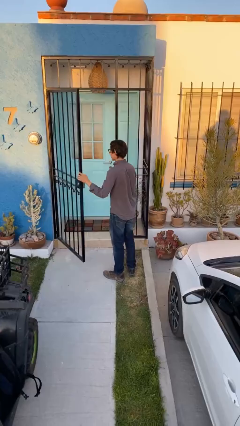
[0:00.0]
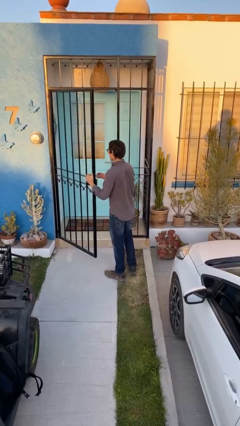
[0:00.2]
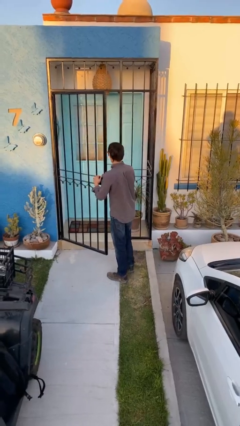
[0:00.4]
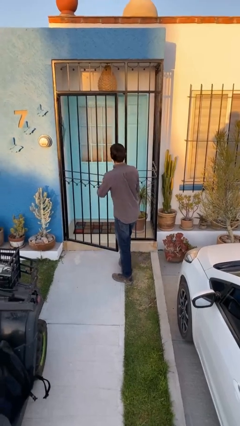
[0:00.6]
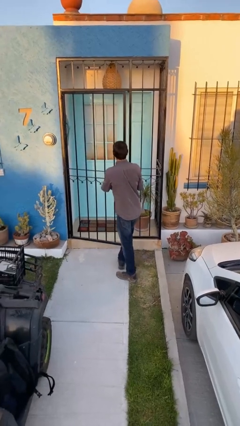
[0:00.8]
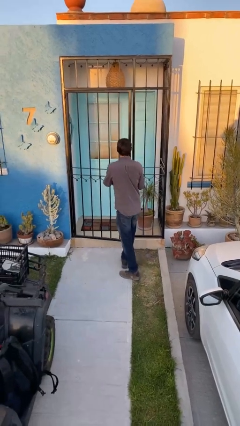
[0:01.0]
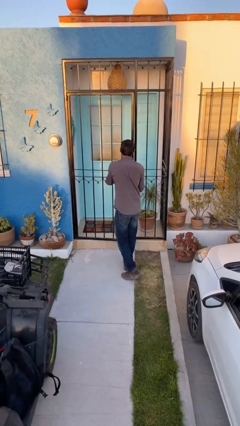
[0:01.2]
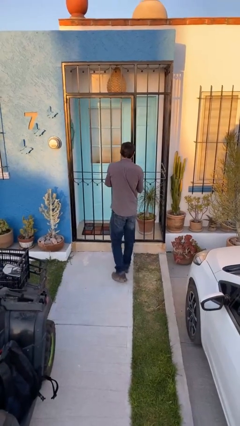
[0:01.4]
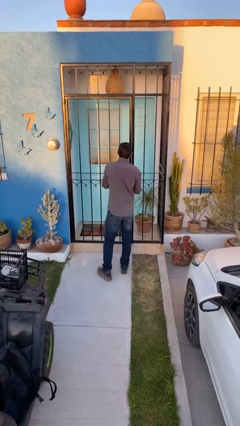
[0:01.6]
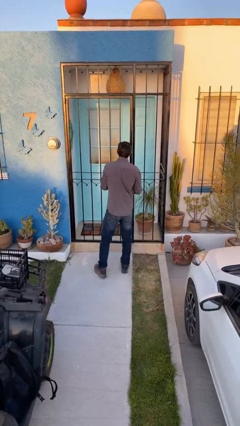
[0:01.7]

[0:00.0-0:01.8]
person closes facility door

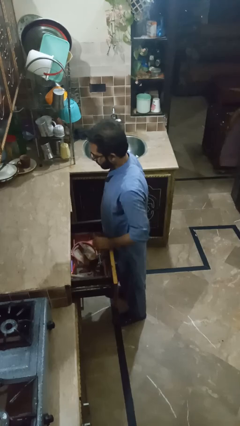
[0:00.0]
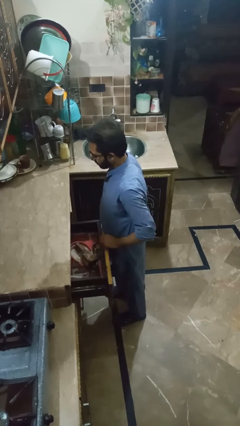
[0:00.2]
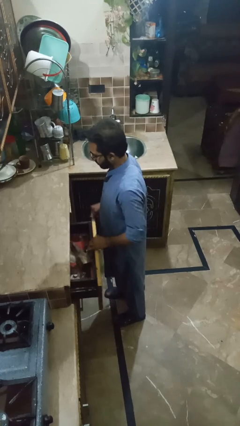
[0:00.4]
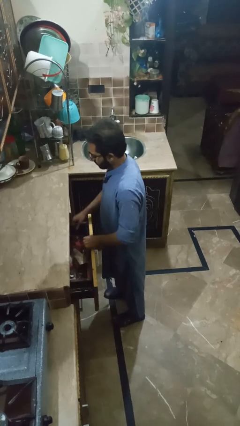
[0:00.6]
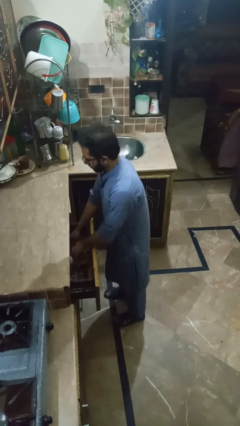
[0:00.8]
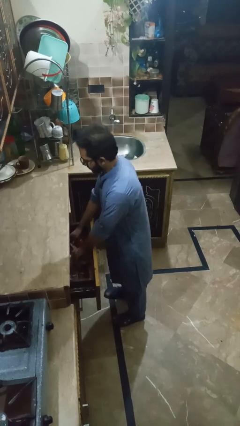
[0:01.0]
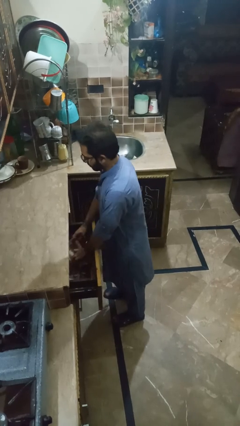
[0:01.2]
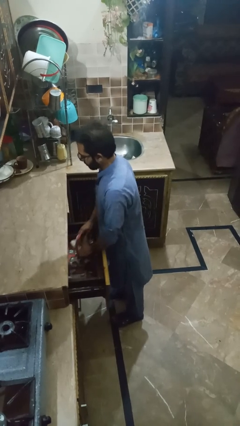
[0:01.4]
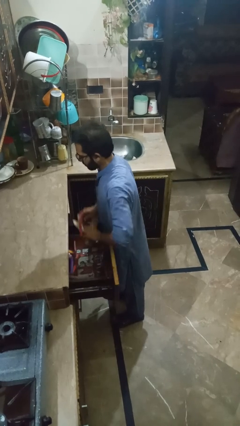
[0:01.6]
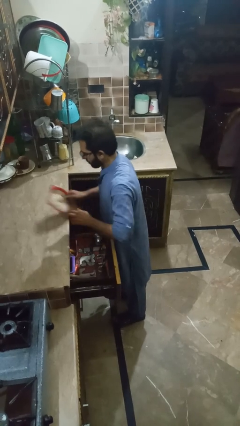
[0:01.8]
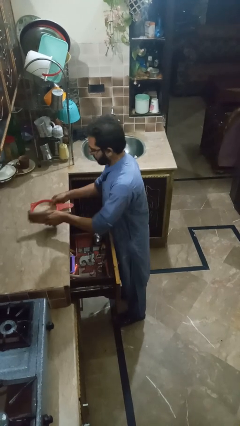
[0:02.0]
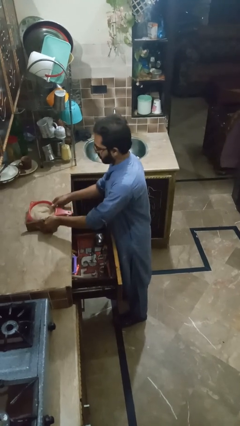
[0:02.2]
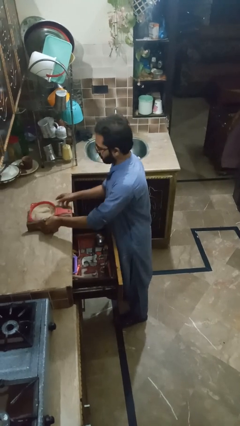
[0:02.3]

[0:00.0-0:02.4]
person puts object into kitchen drawer

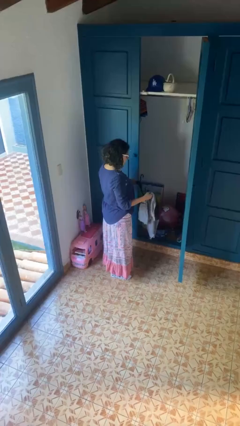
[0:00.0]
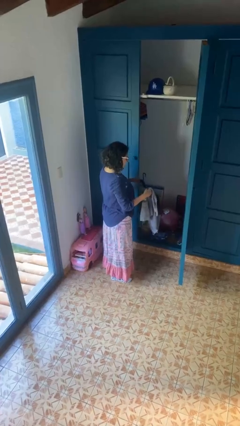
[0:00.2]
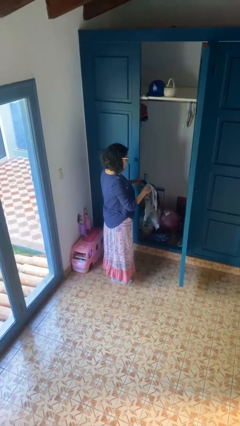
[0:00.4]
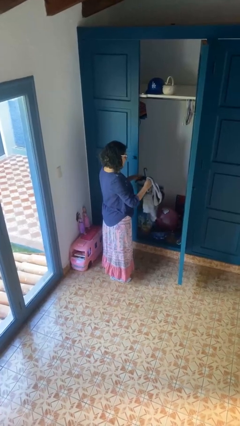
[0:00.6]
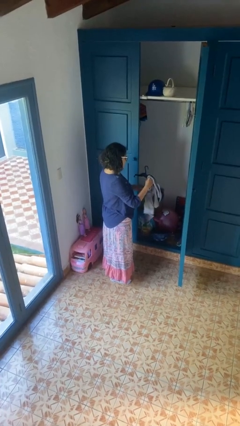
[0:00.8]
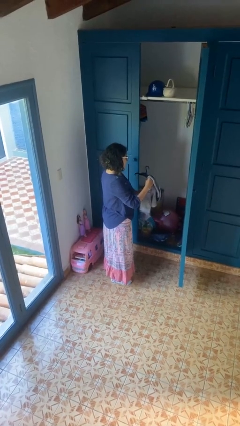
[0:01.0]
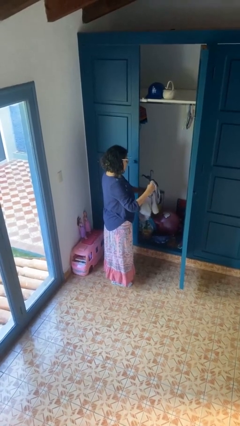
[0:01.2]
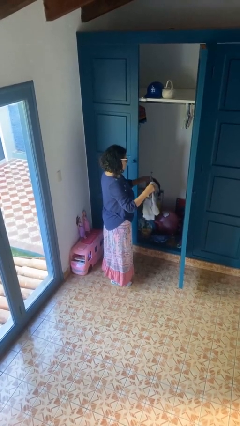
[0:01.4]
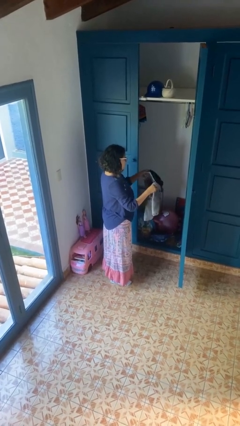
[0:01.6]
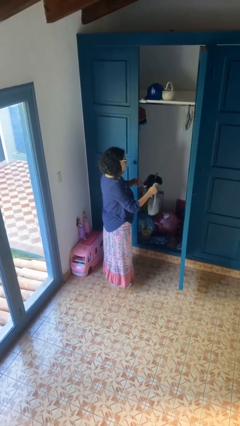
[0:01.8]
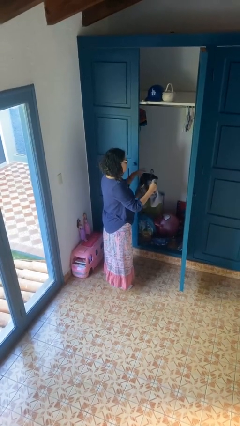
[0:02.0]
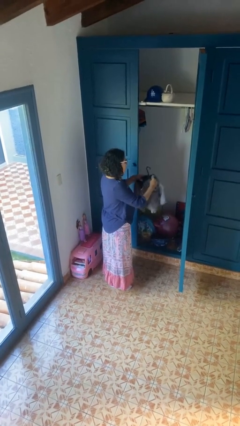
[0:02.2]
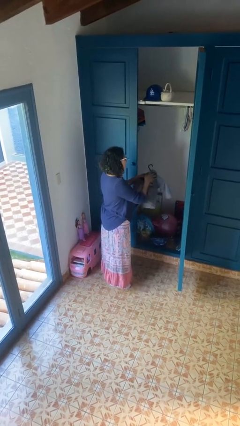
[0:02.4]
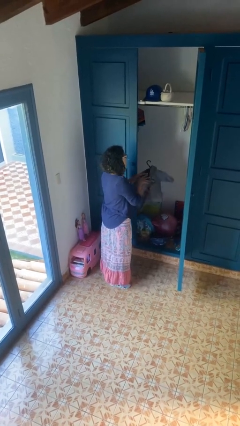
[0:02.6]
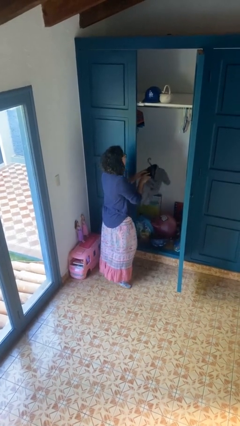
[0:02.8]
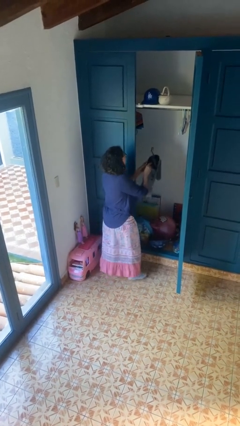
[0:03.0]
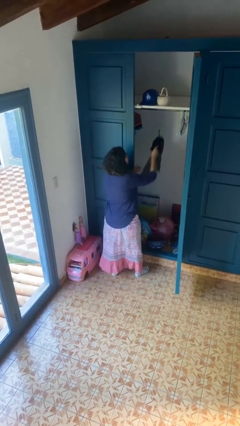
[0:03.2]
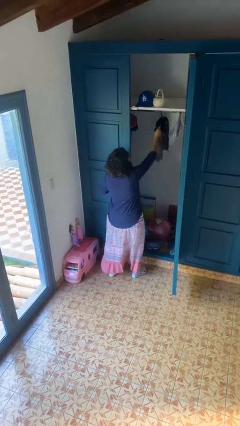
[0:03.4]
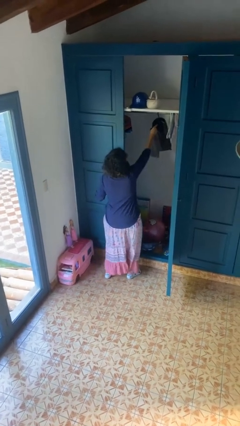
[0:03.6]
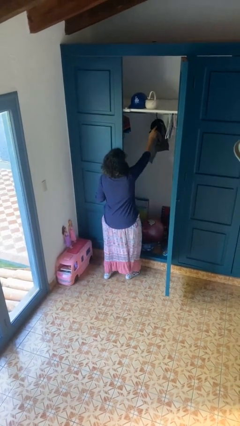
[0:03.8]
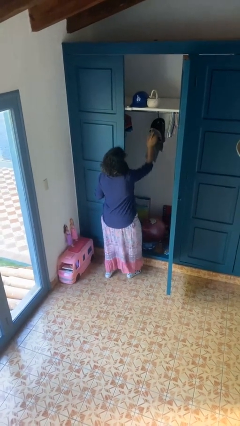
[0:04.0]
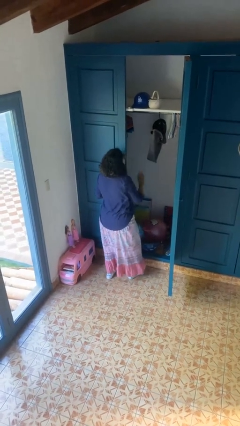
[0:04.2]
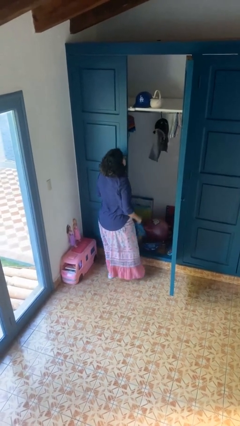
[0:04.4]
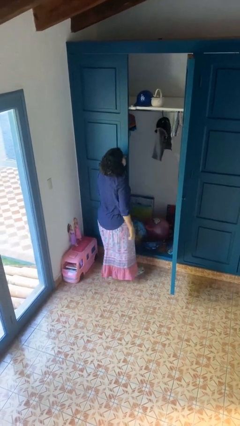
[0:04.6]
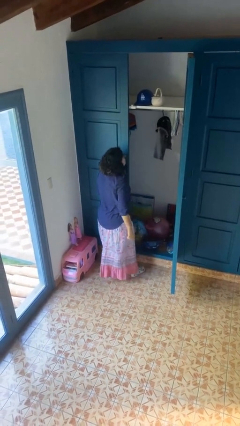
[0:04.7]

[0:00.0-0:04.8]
person puts clothes into closet

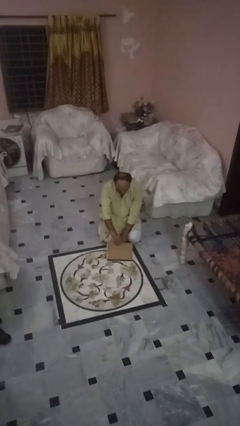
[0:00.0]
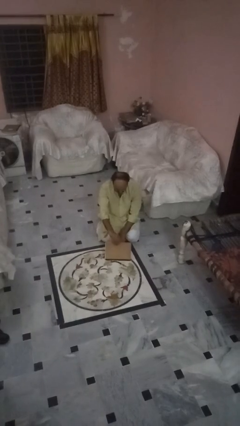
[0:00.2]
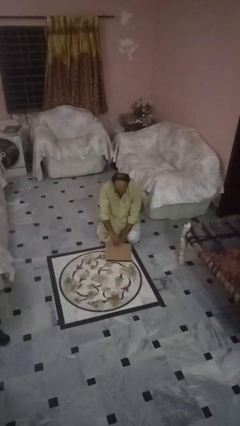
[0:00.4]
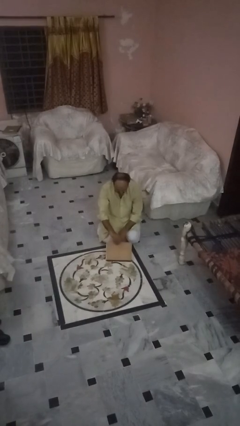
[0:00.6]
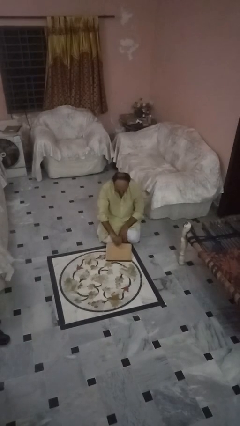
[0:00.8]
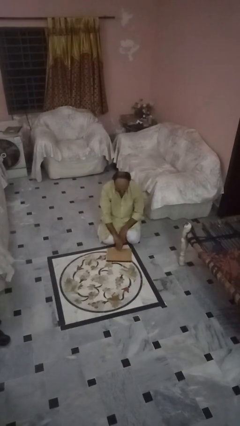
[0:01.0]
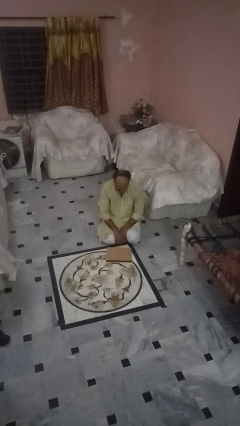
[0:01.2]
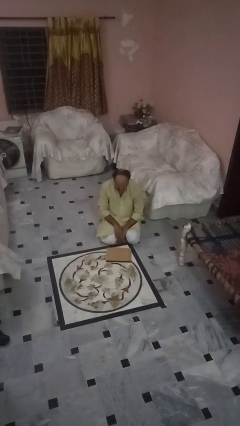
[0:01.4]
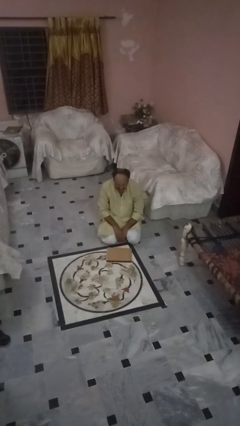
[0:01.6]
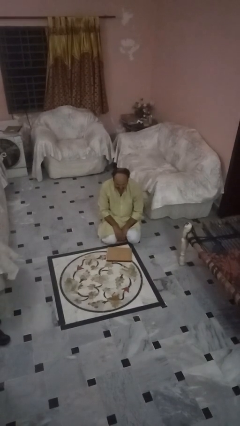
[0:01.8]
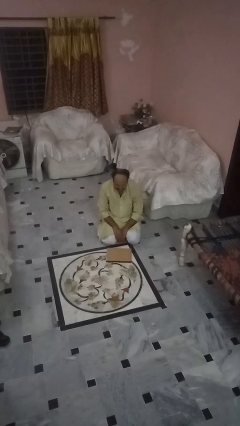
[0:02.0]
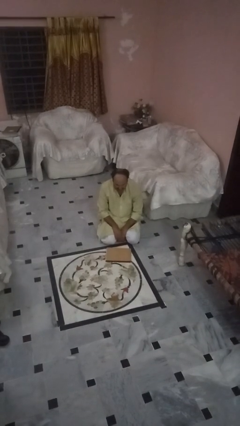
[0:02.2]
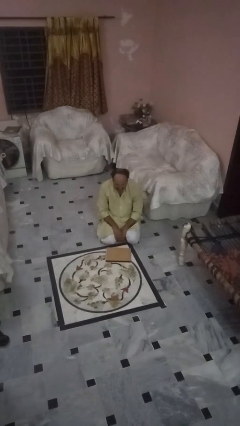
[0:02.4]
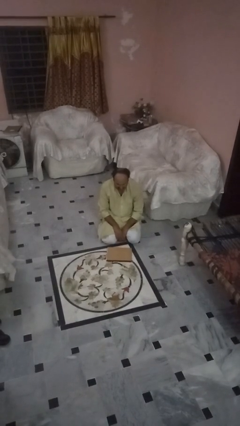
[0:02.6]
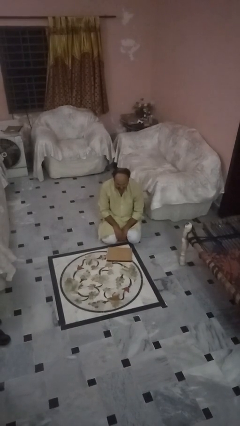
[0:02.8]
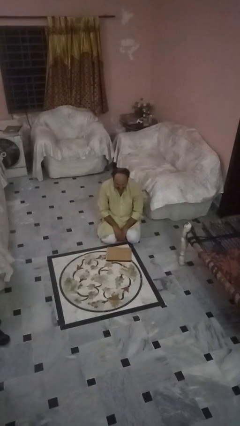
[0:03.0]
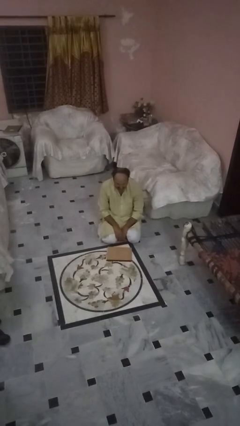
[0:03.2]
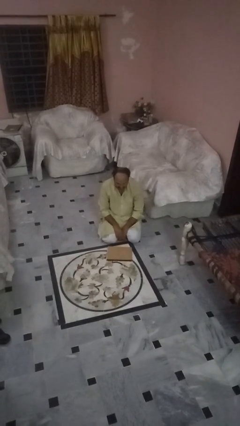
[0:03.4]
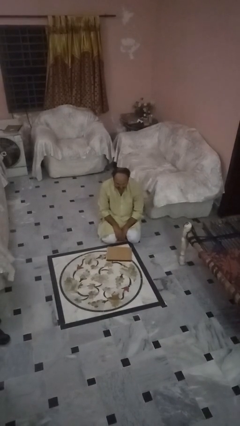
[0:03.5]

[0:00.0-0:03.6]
person closes laptop

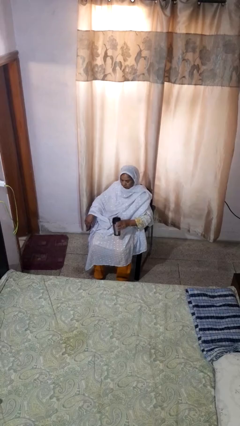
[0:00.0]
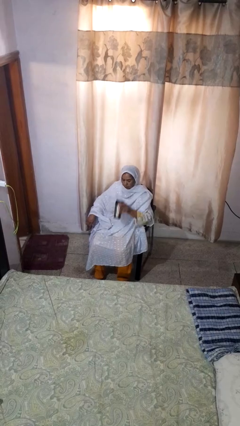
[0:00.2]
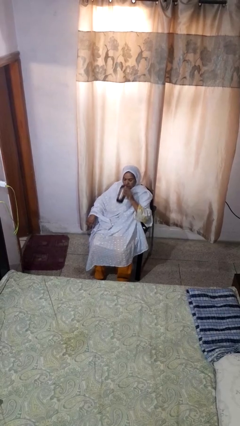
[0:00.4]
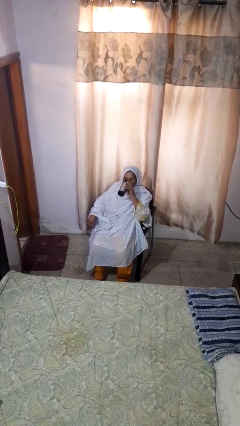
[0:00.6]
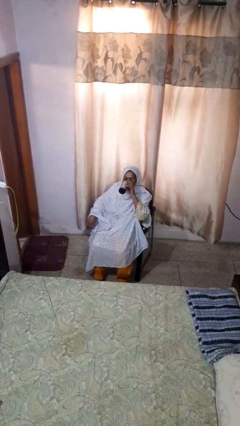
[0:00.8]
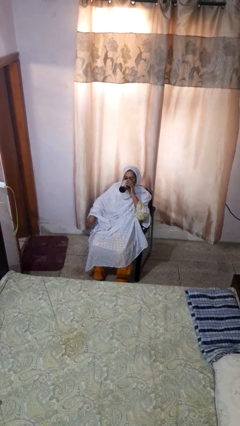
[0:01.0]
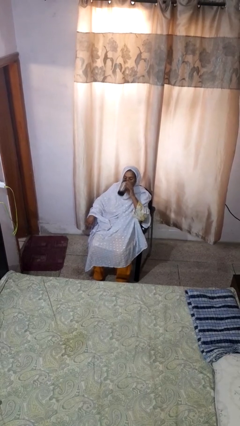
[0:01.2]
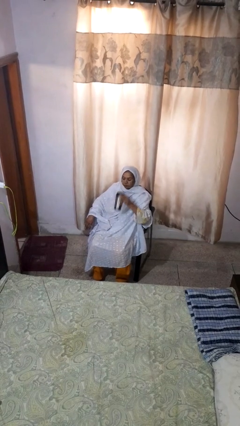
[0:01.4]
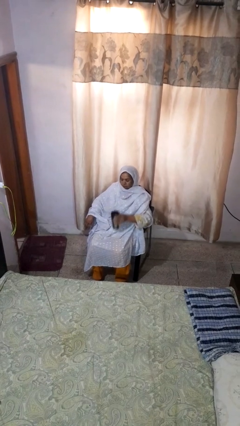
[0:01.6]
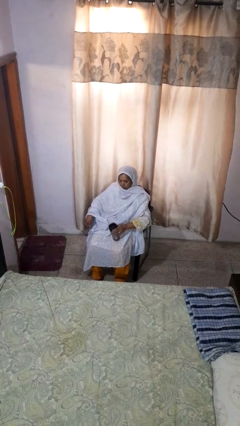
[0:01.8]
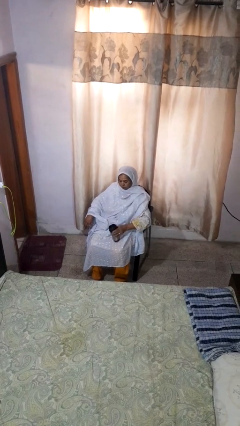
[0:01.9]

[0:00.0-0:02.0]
person drinks from beverage can

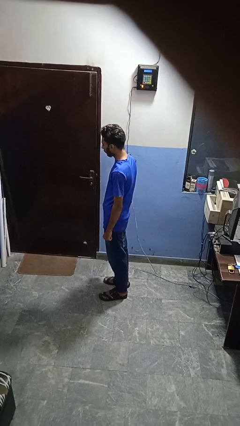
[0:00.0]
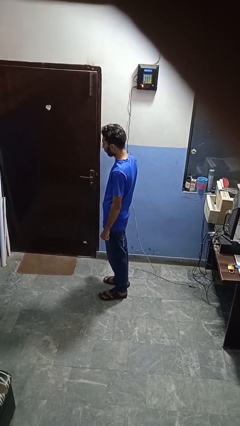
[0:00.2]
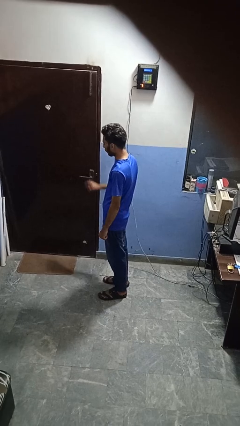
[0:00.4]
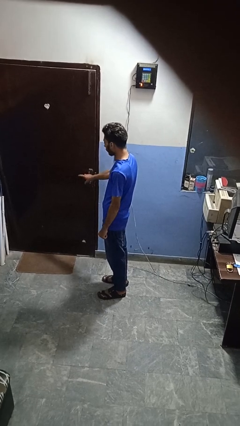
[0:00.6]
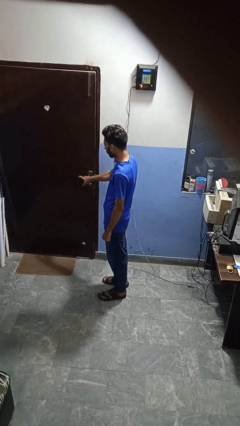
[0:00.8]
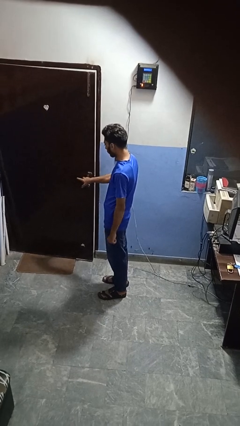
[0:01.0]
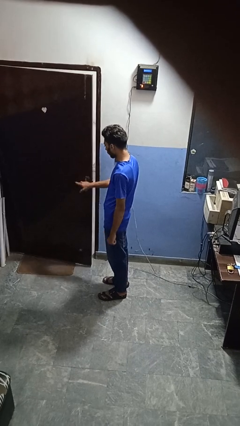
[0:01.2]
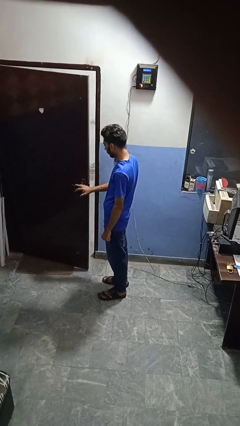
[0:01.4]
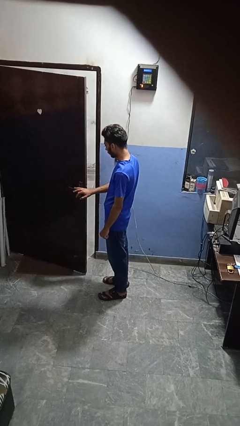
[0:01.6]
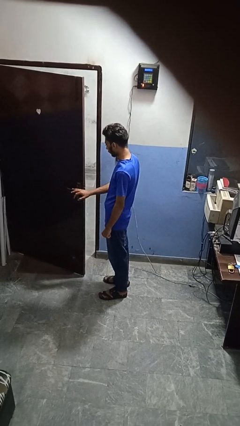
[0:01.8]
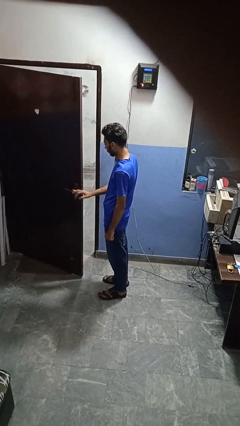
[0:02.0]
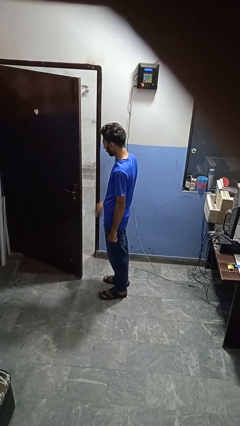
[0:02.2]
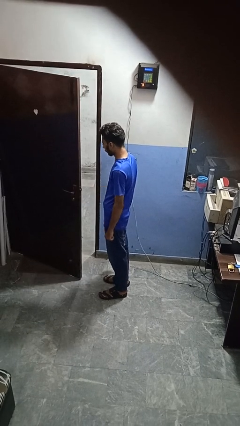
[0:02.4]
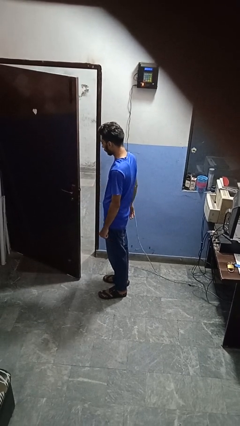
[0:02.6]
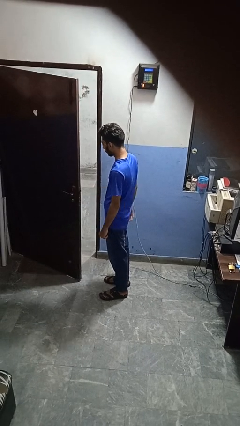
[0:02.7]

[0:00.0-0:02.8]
person opens facility door

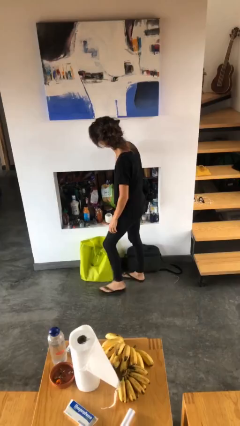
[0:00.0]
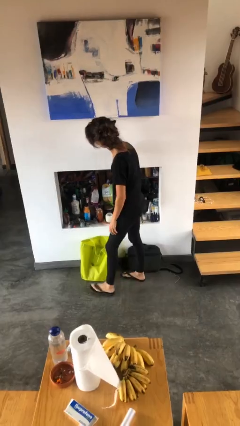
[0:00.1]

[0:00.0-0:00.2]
person searches in cabinet
